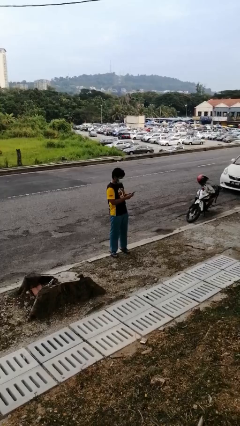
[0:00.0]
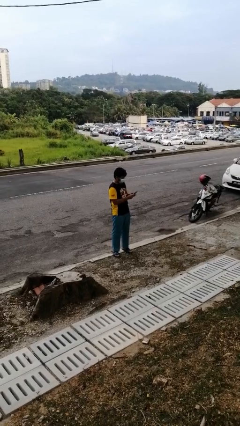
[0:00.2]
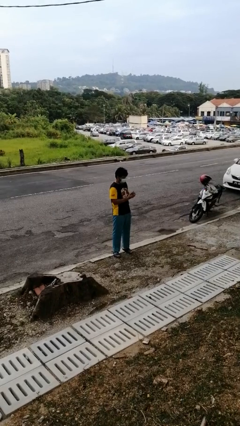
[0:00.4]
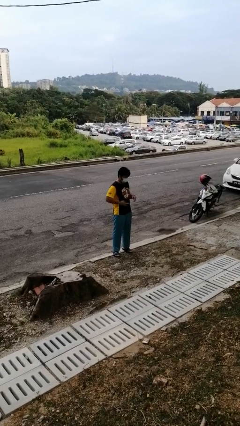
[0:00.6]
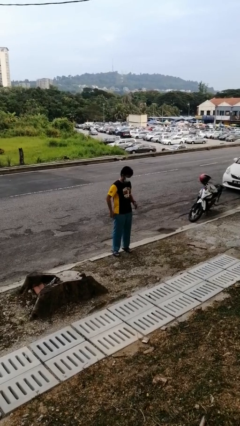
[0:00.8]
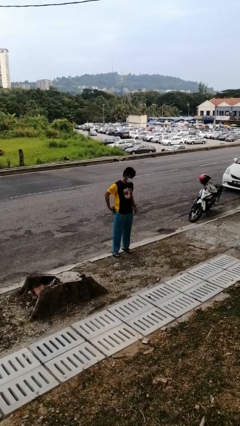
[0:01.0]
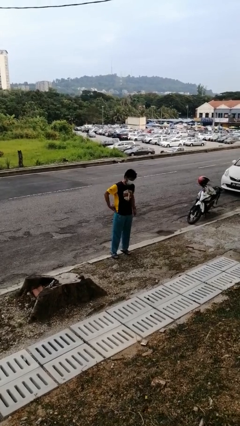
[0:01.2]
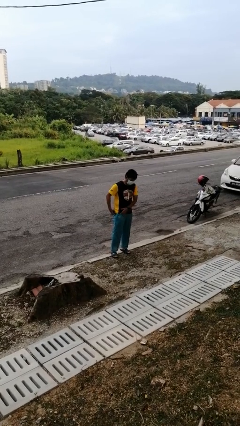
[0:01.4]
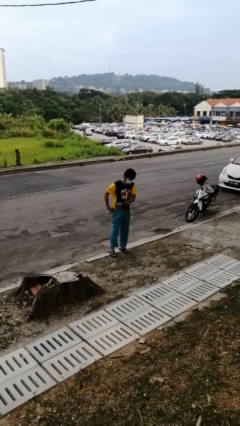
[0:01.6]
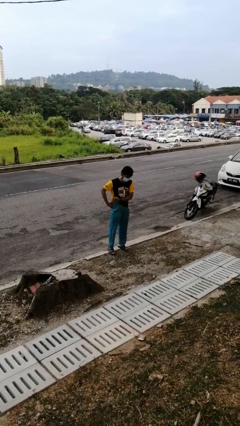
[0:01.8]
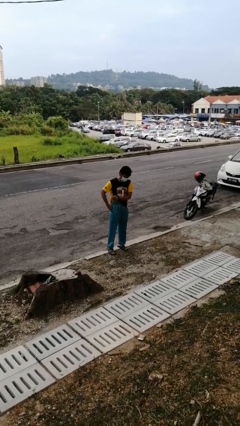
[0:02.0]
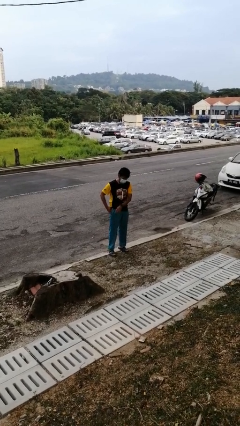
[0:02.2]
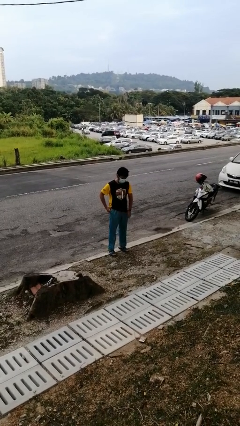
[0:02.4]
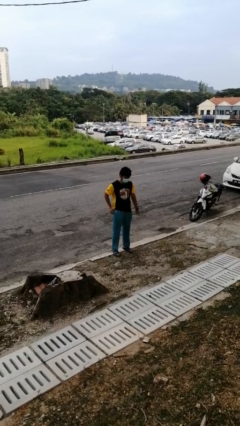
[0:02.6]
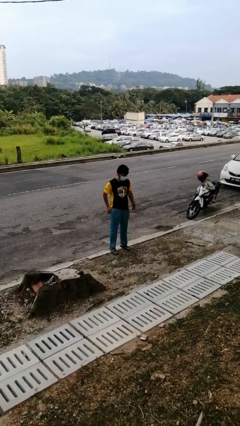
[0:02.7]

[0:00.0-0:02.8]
person puts phone into pocket

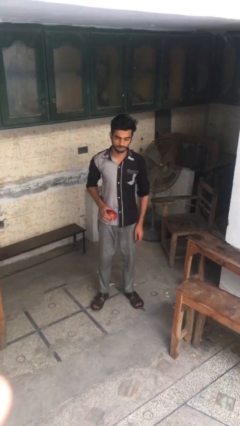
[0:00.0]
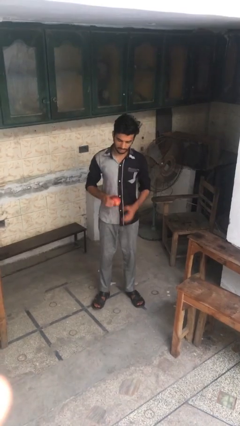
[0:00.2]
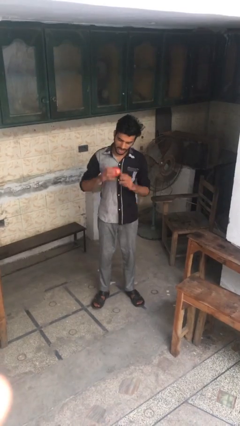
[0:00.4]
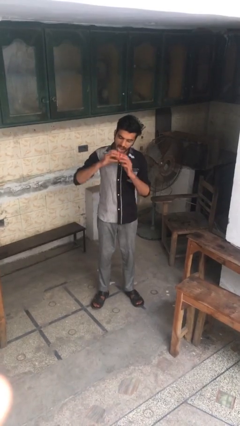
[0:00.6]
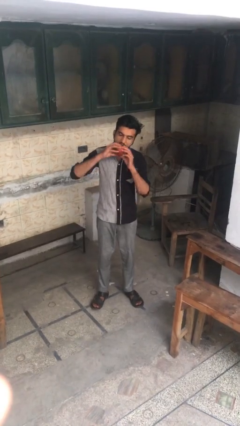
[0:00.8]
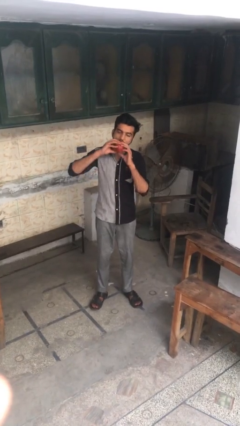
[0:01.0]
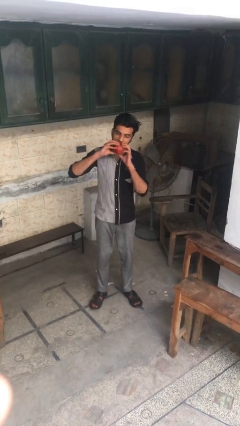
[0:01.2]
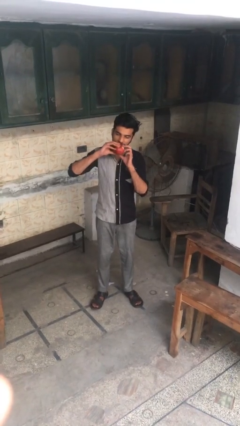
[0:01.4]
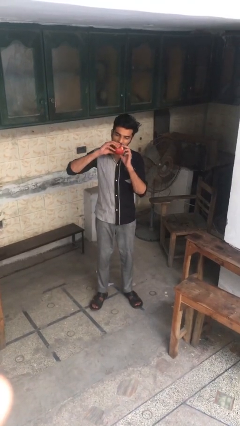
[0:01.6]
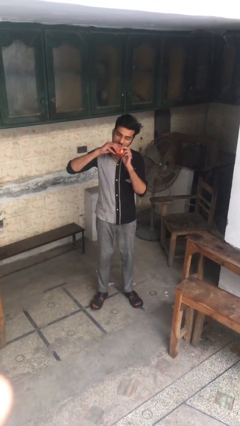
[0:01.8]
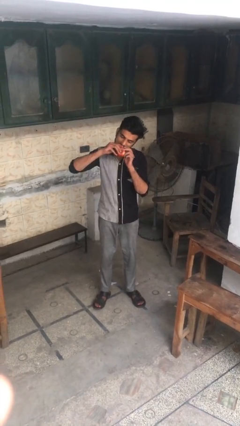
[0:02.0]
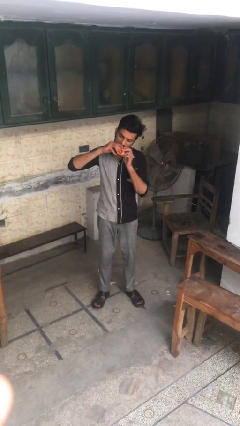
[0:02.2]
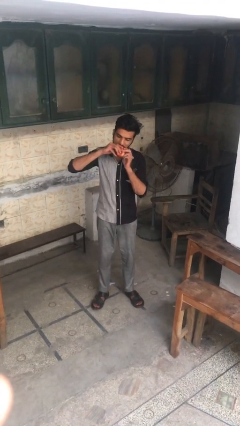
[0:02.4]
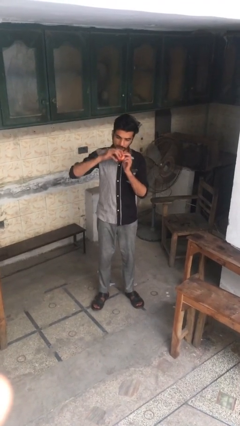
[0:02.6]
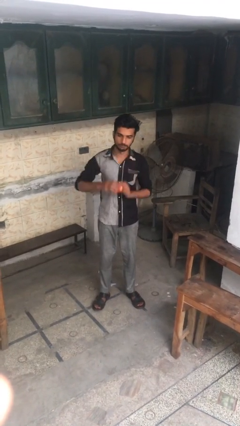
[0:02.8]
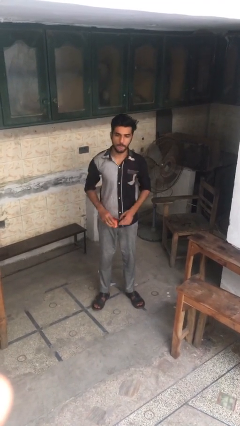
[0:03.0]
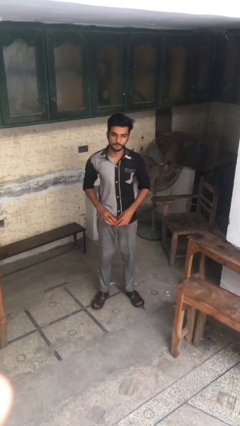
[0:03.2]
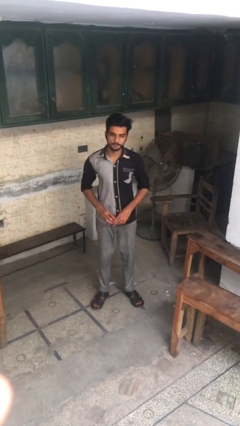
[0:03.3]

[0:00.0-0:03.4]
person eats apple

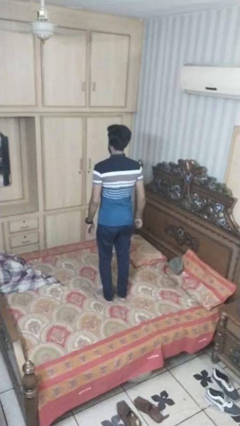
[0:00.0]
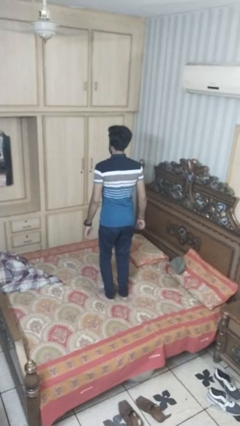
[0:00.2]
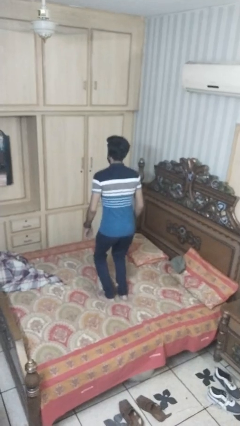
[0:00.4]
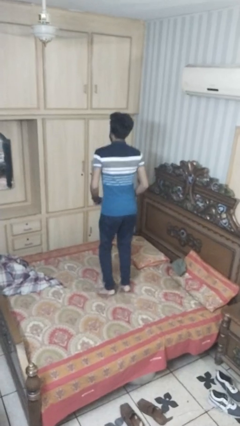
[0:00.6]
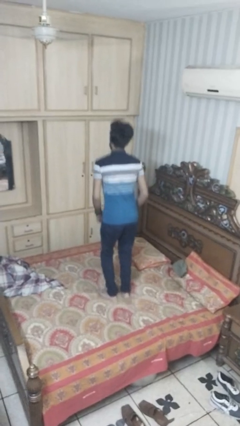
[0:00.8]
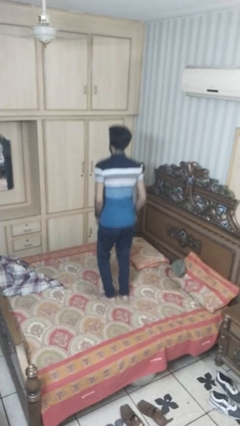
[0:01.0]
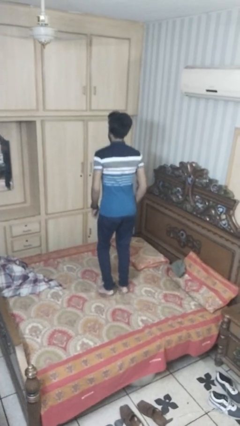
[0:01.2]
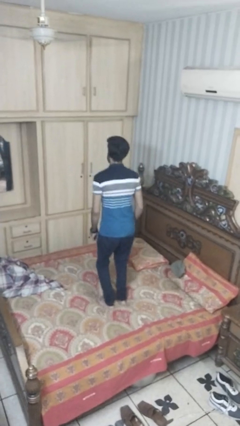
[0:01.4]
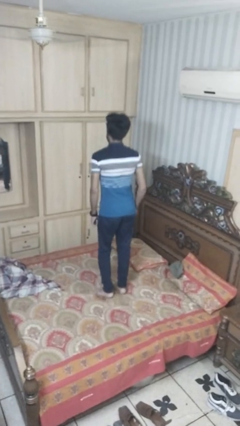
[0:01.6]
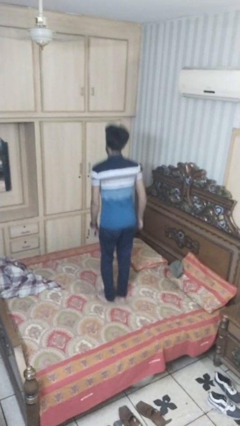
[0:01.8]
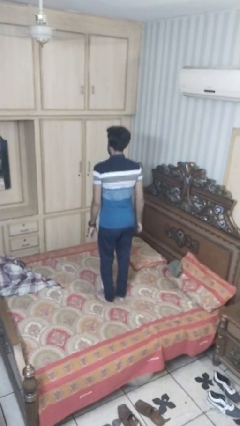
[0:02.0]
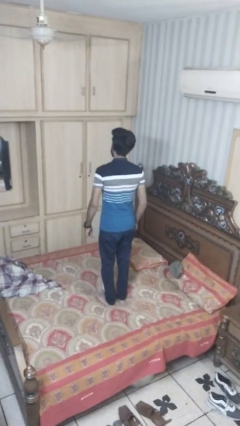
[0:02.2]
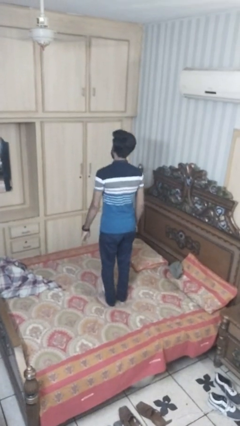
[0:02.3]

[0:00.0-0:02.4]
person jumps on bed

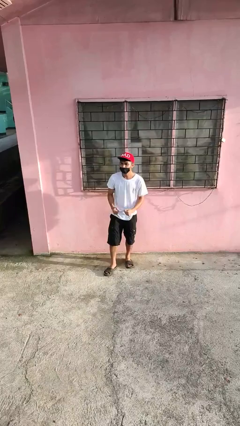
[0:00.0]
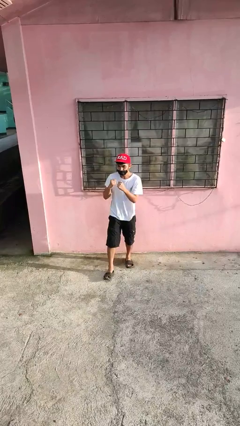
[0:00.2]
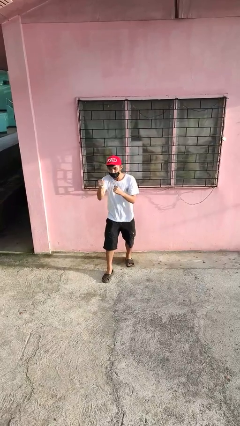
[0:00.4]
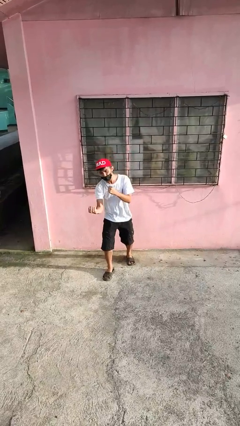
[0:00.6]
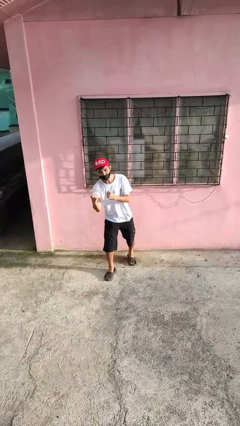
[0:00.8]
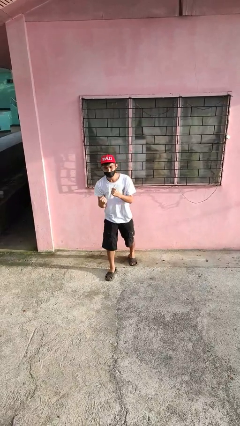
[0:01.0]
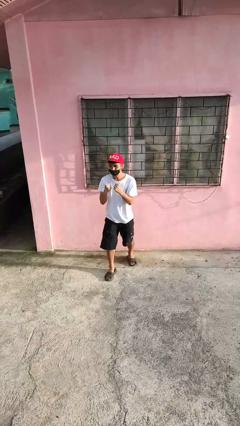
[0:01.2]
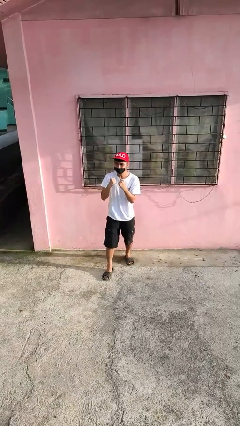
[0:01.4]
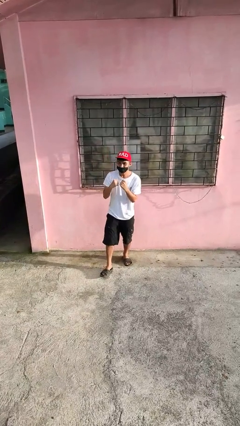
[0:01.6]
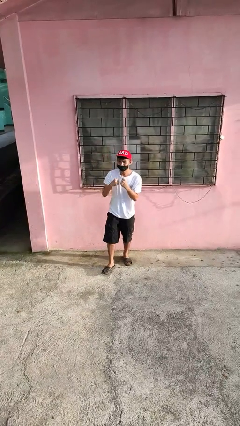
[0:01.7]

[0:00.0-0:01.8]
person punches

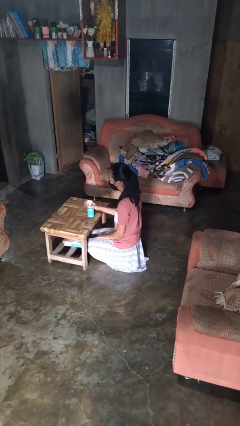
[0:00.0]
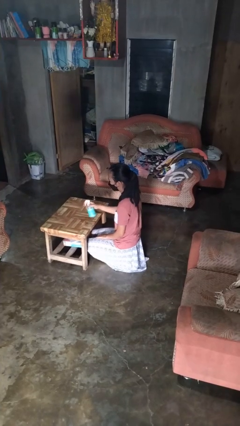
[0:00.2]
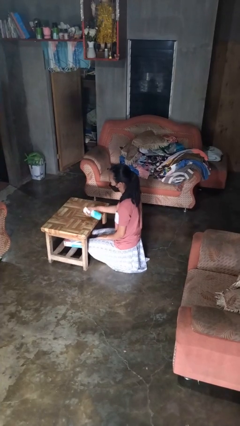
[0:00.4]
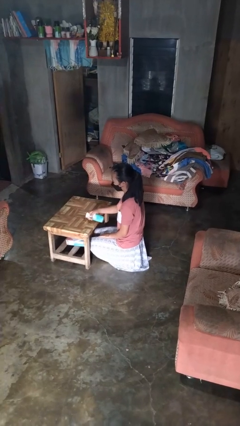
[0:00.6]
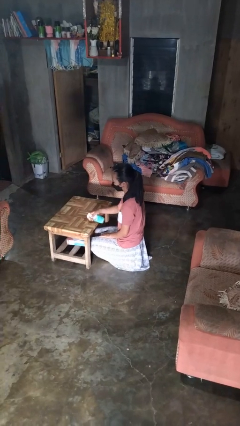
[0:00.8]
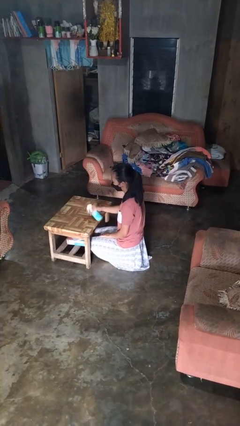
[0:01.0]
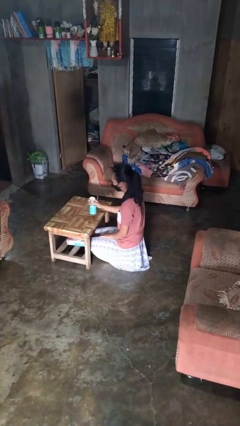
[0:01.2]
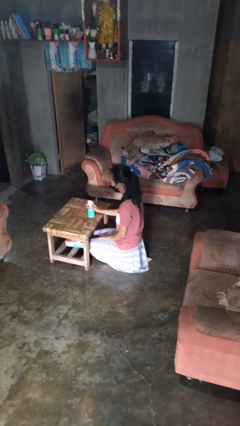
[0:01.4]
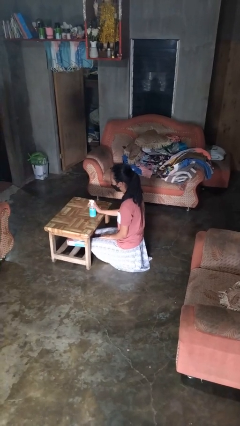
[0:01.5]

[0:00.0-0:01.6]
person sprays from bottle

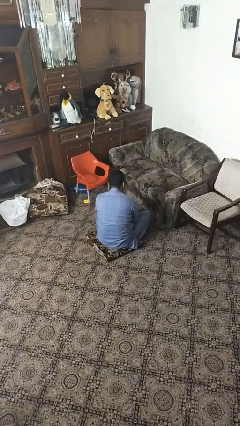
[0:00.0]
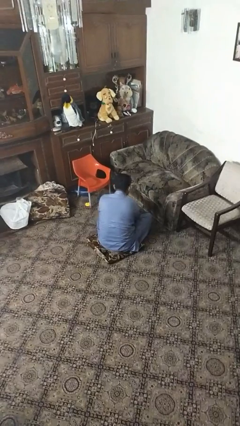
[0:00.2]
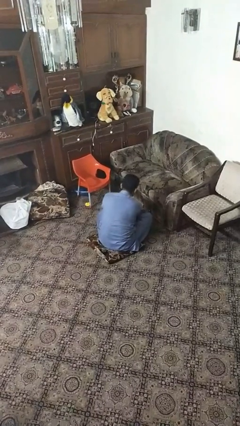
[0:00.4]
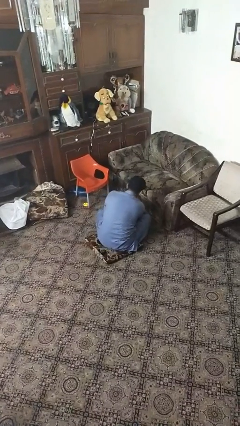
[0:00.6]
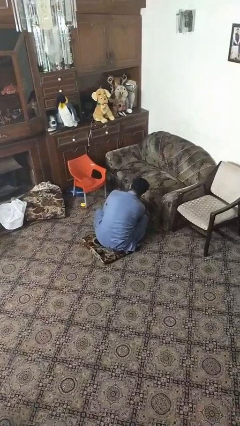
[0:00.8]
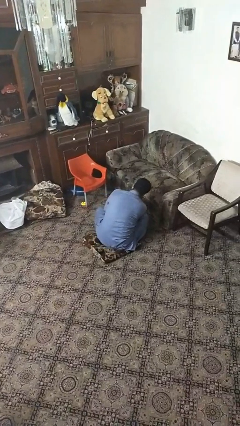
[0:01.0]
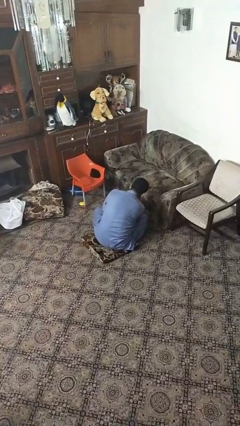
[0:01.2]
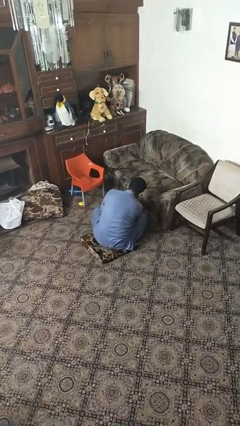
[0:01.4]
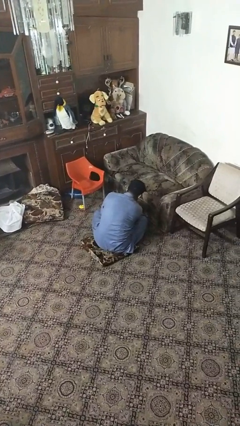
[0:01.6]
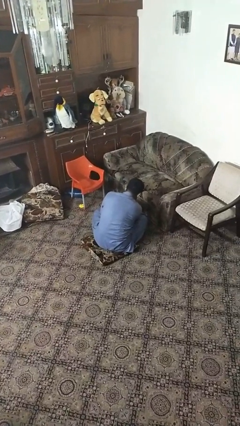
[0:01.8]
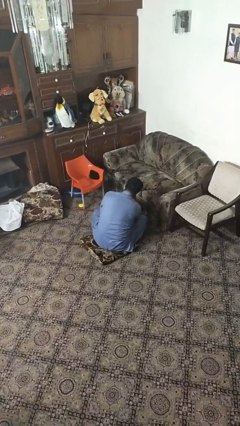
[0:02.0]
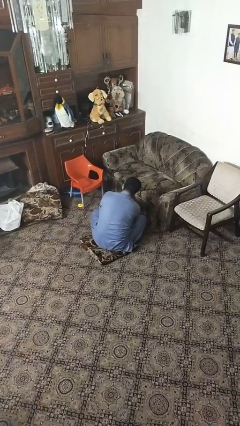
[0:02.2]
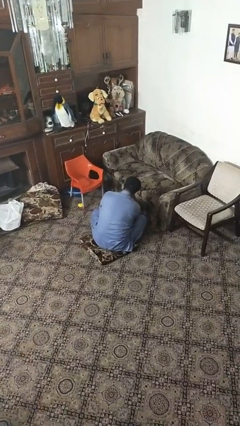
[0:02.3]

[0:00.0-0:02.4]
person searches under couch

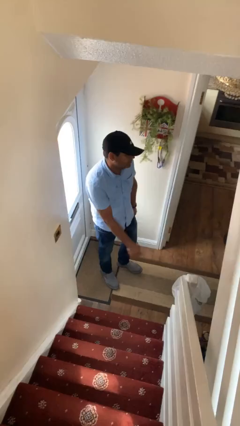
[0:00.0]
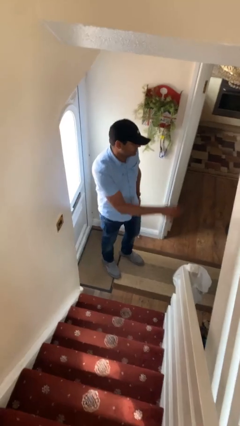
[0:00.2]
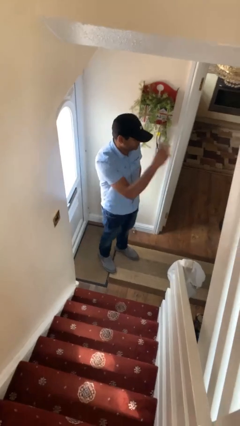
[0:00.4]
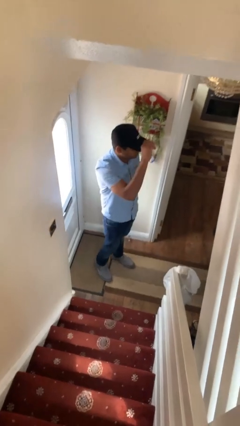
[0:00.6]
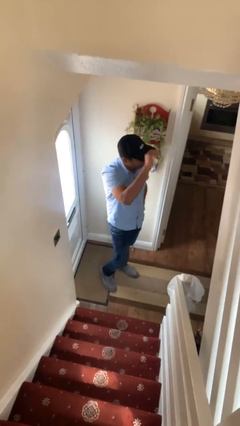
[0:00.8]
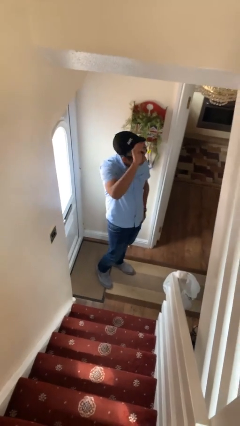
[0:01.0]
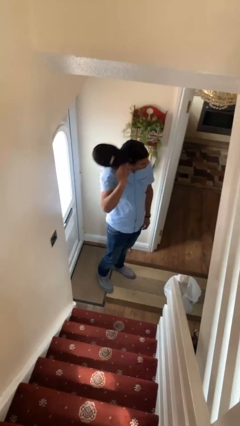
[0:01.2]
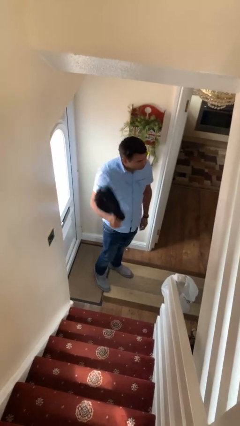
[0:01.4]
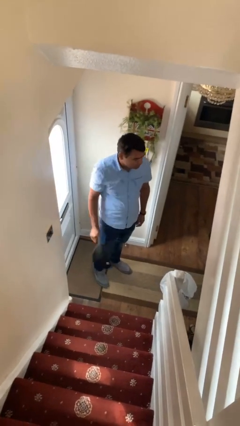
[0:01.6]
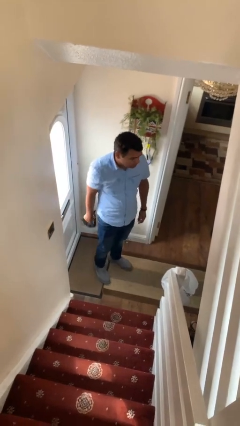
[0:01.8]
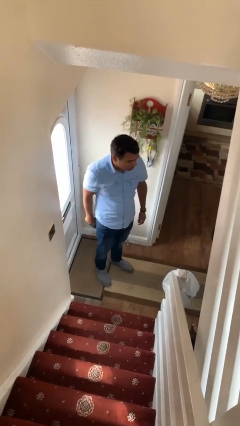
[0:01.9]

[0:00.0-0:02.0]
person takes off hat

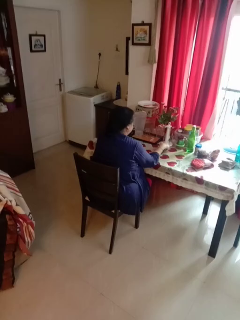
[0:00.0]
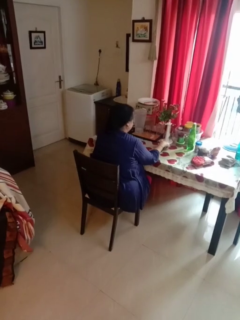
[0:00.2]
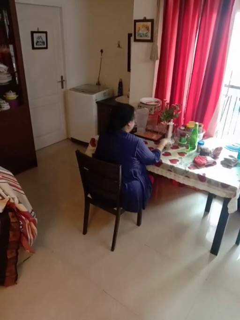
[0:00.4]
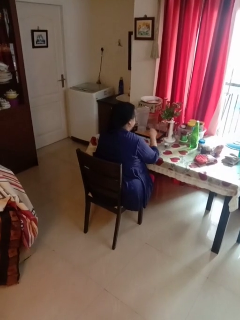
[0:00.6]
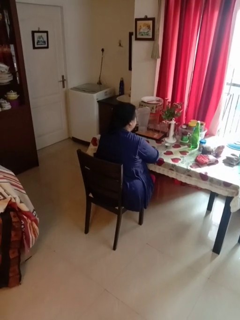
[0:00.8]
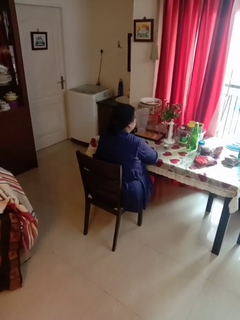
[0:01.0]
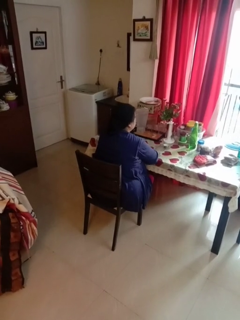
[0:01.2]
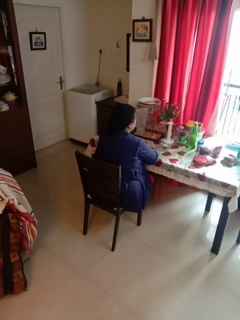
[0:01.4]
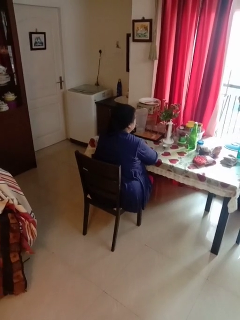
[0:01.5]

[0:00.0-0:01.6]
person puts down object on table
